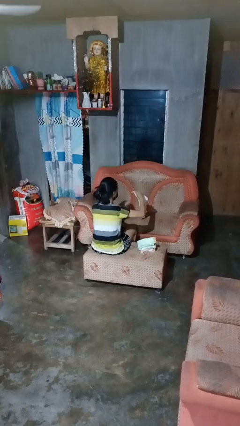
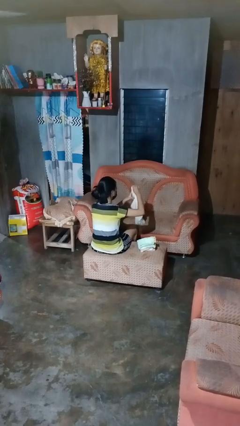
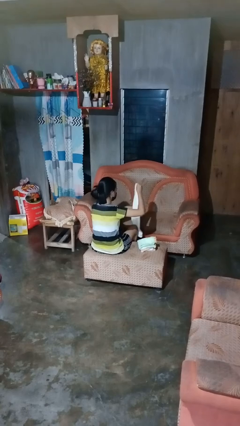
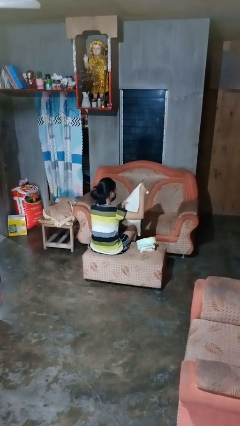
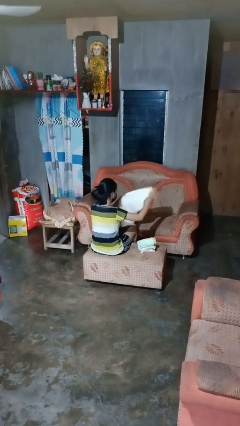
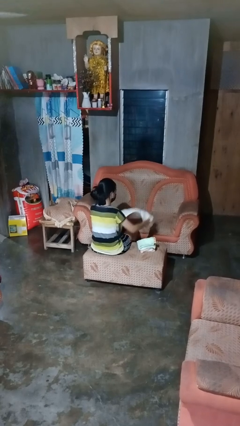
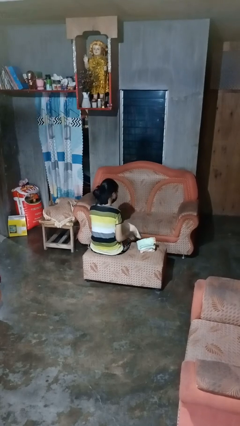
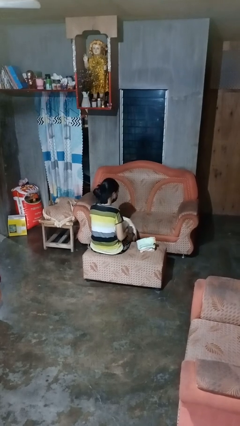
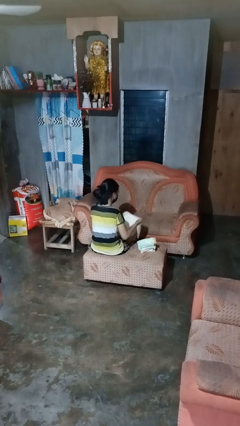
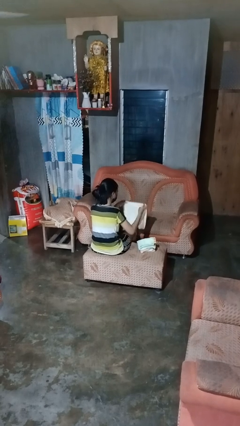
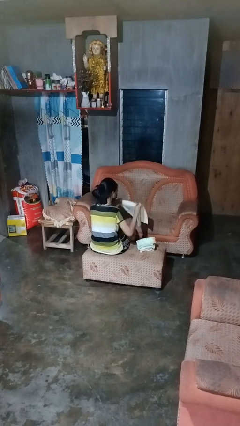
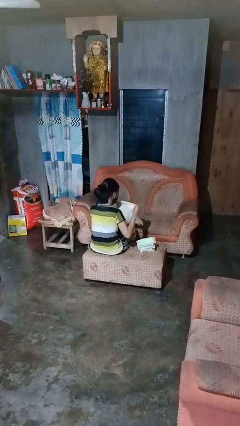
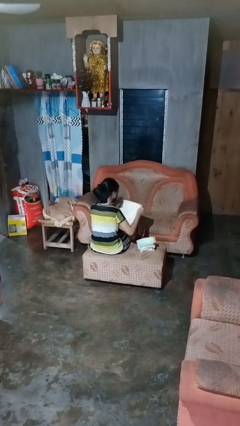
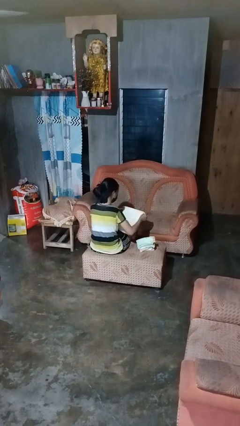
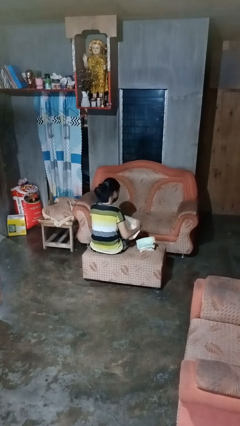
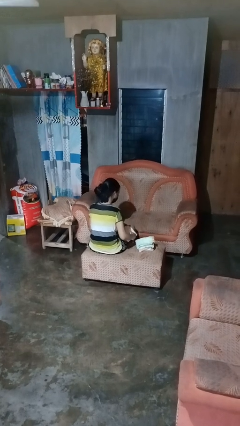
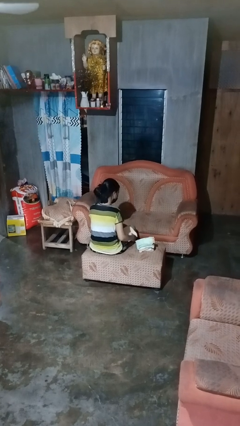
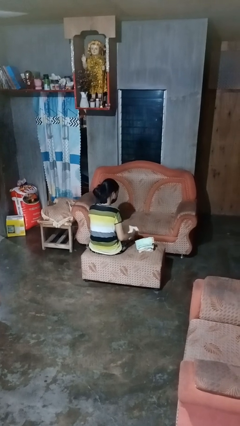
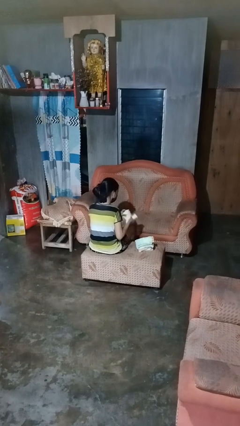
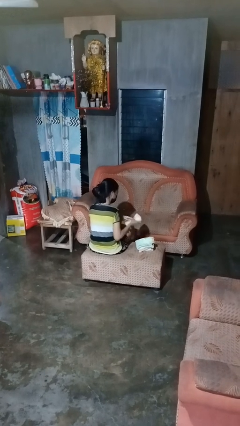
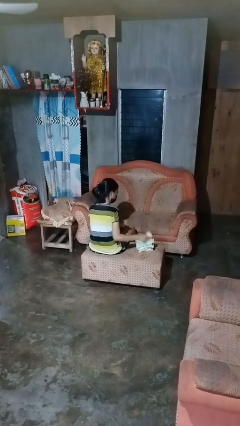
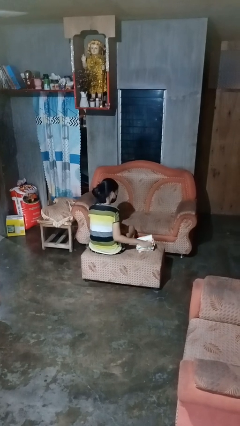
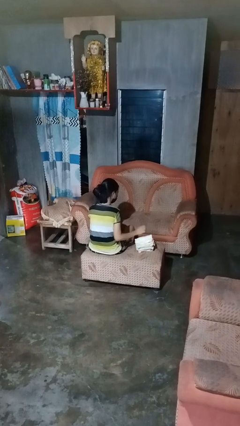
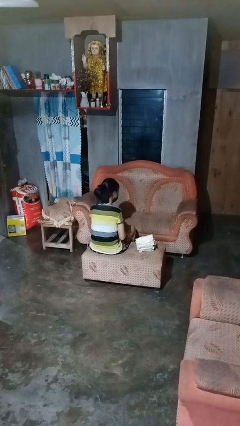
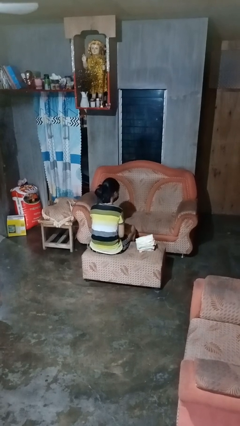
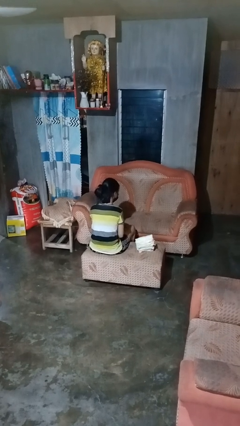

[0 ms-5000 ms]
person folds towel

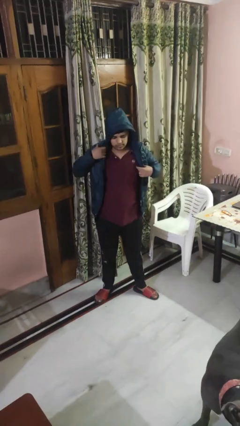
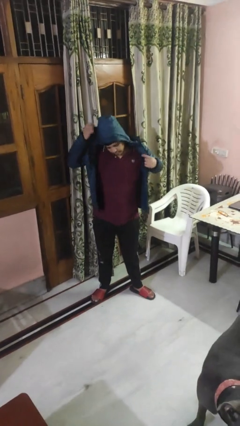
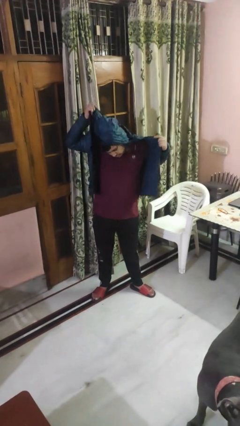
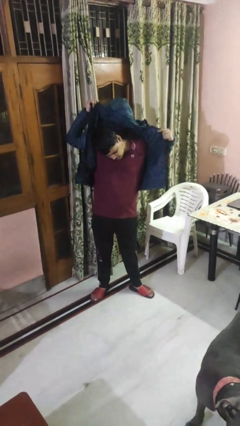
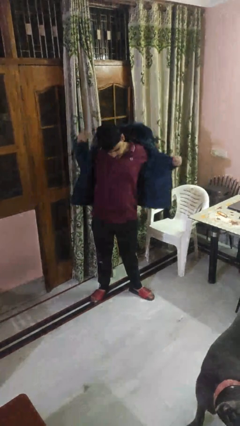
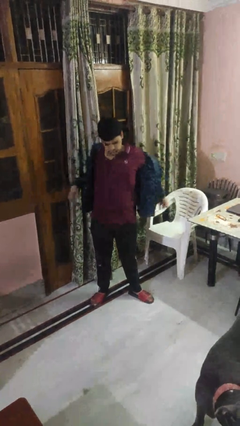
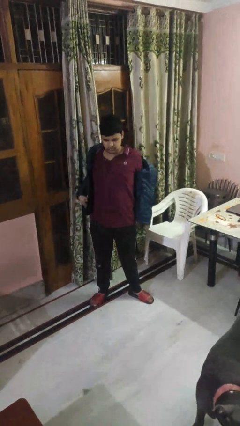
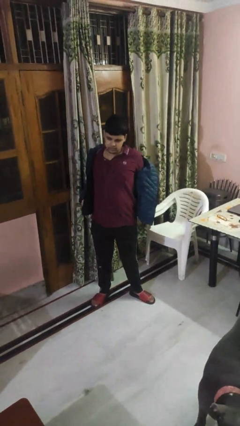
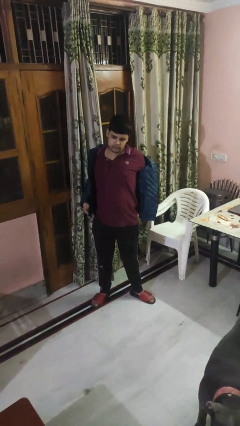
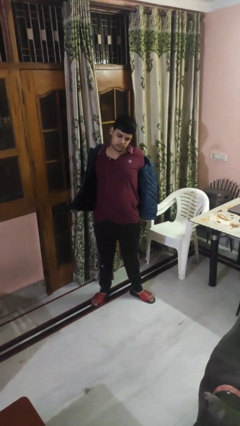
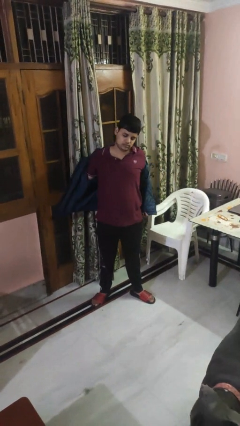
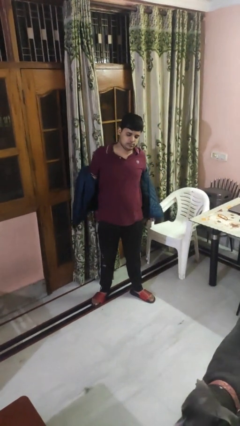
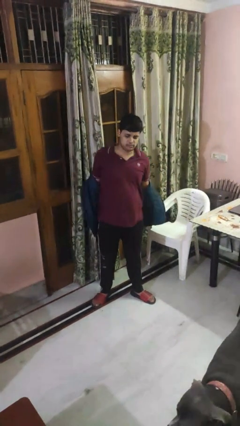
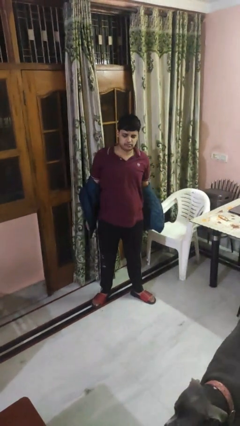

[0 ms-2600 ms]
person takes off hoodie

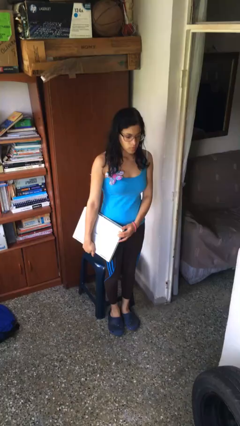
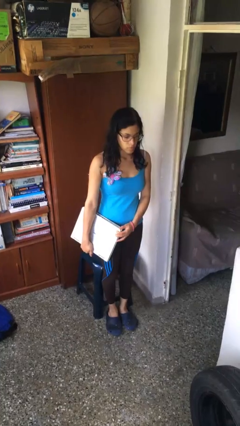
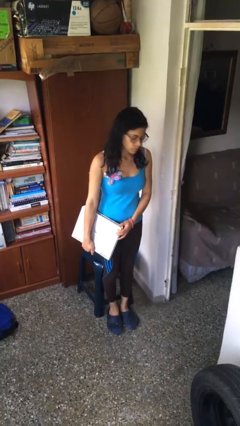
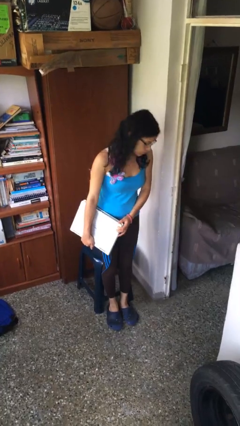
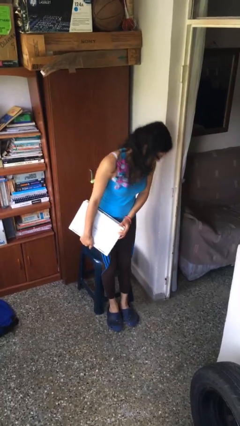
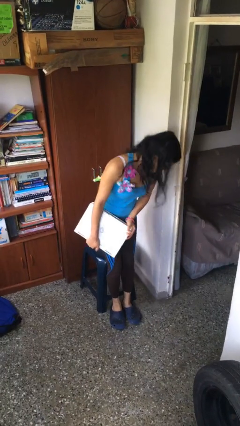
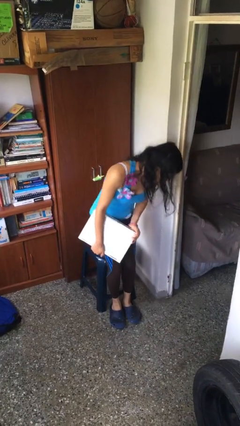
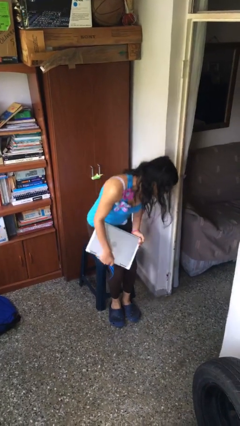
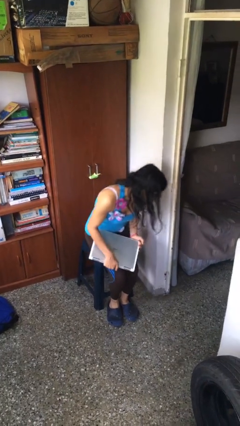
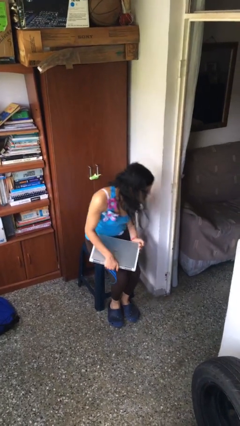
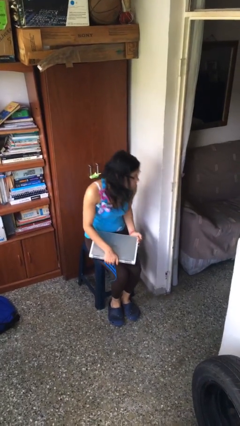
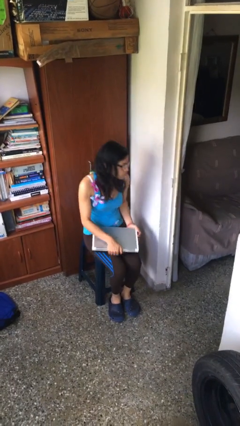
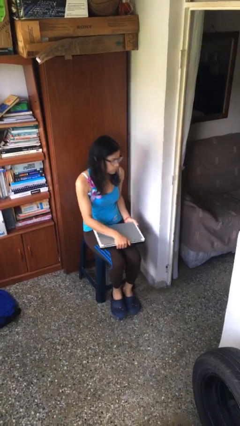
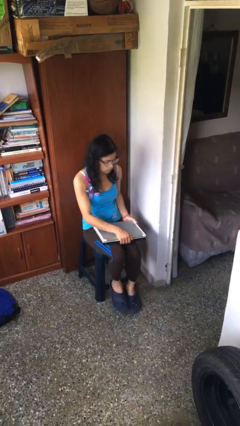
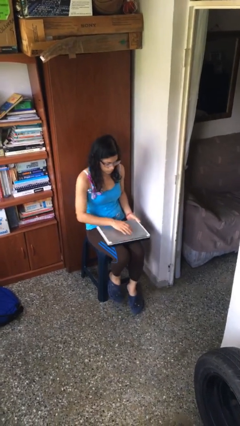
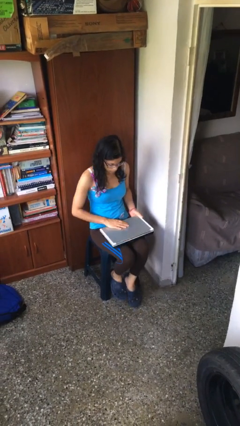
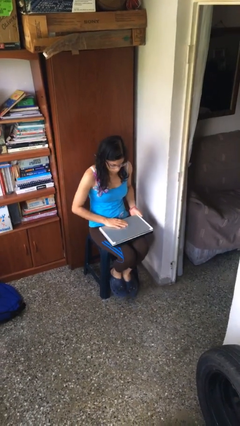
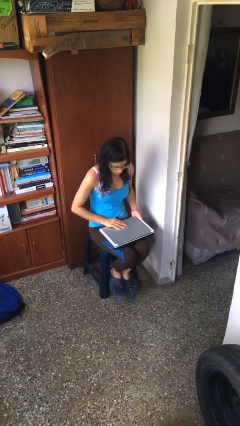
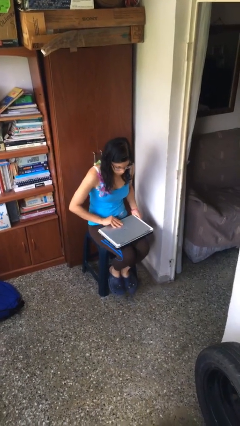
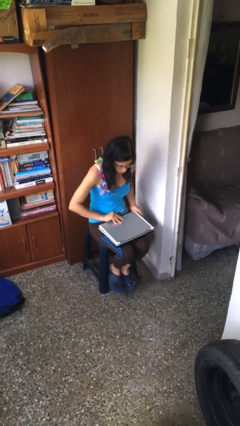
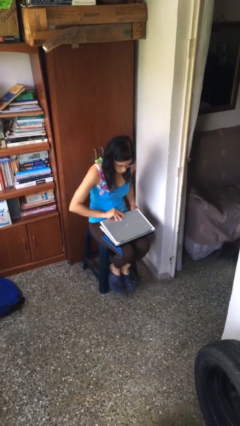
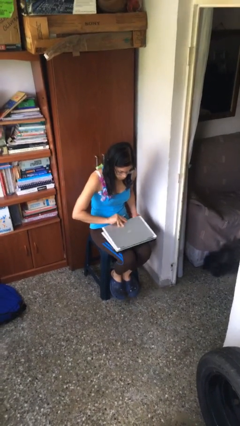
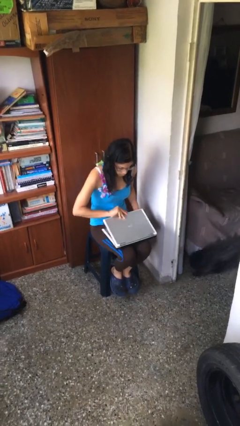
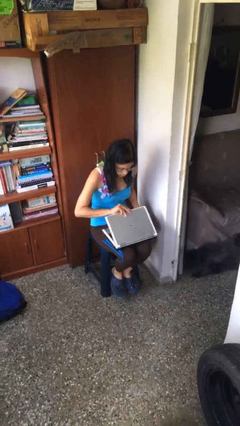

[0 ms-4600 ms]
person sits down

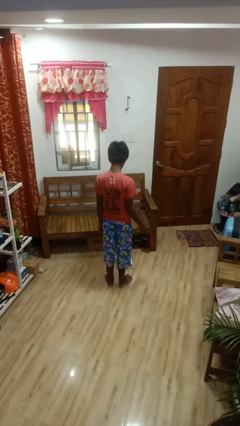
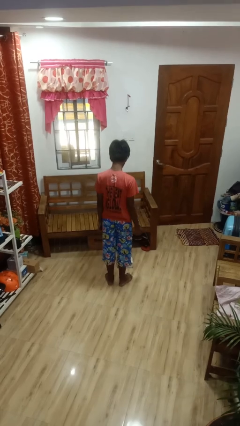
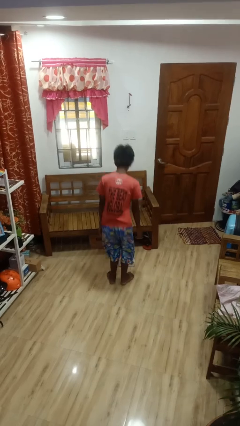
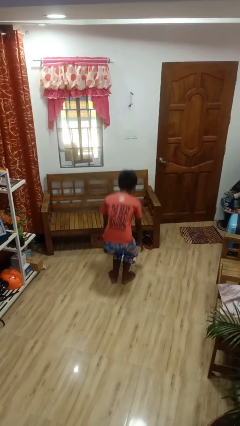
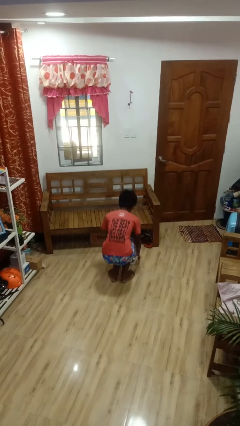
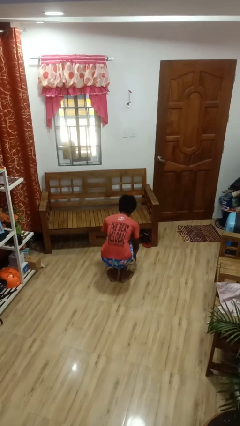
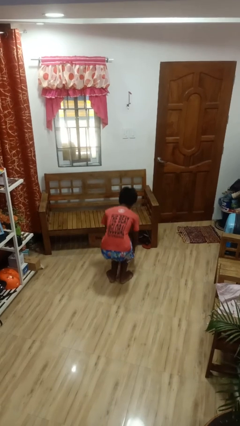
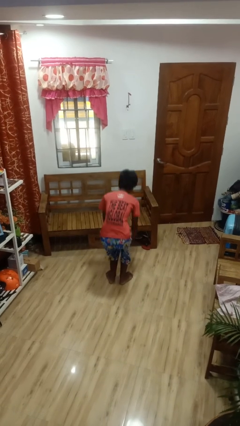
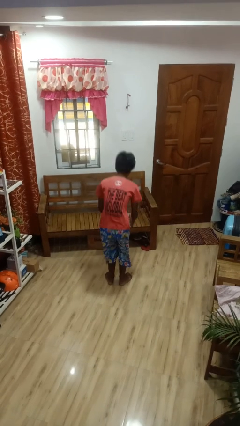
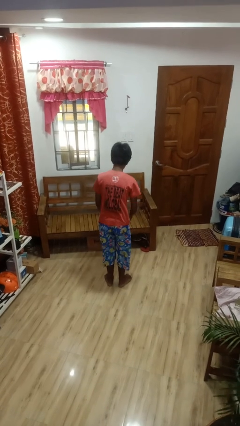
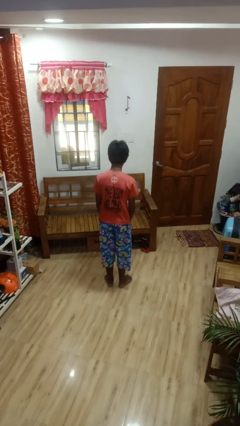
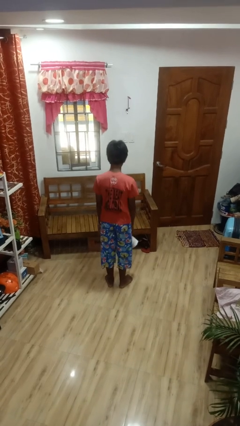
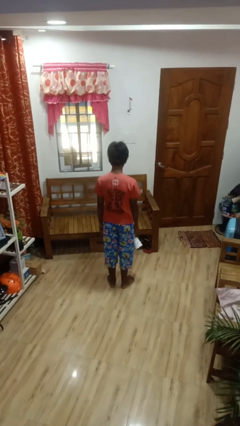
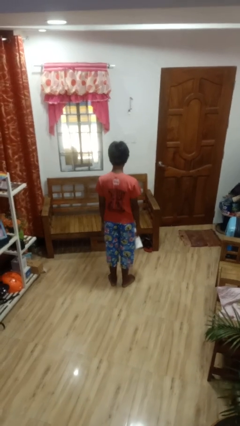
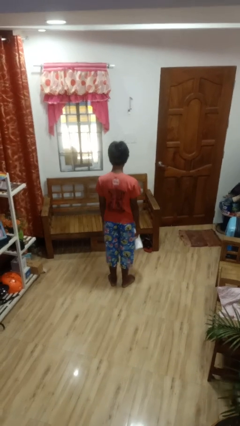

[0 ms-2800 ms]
person picks up object from floor

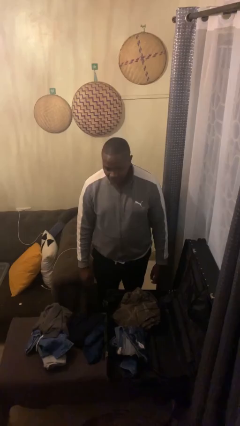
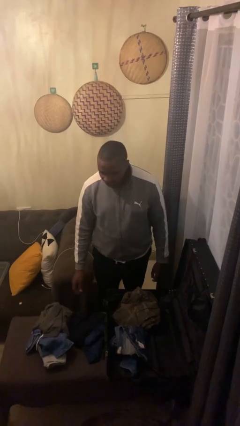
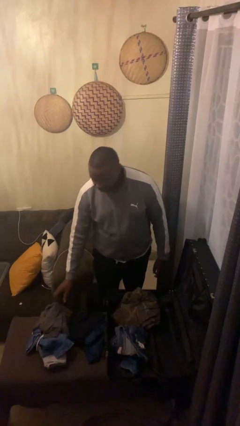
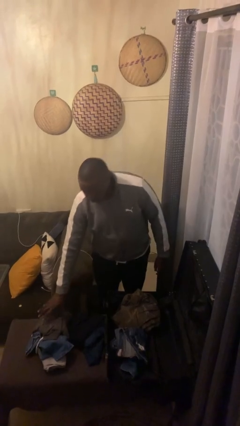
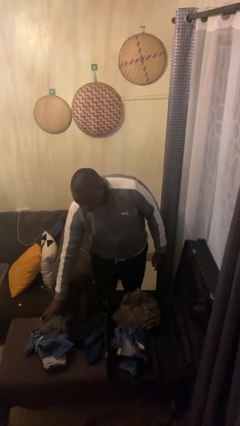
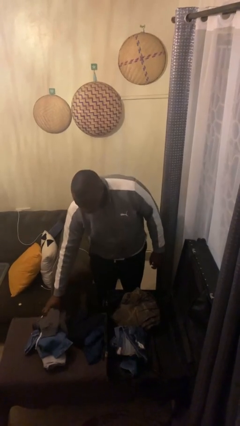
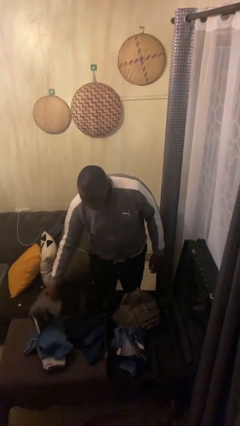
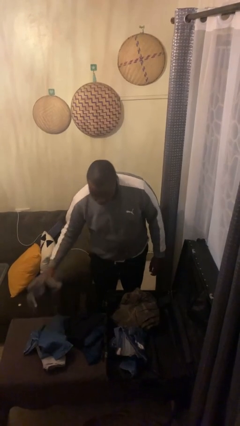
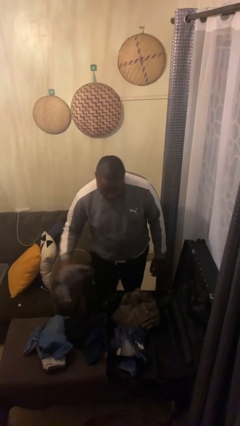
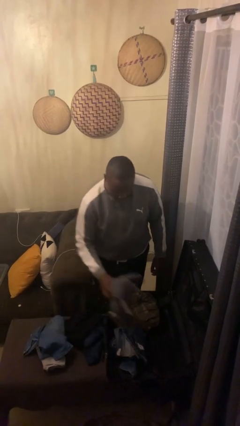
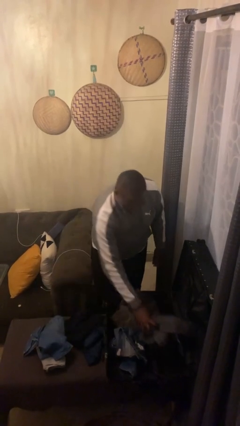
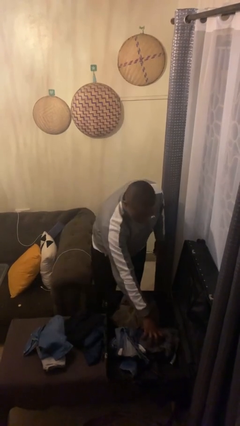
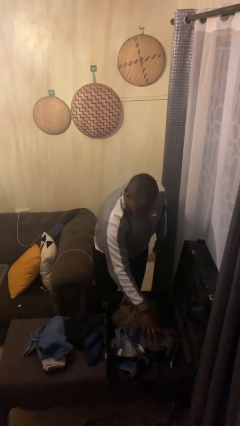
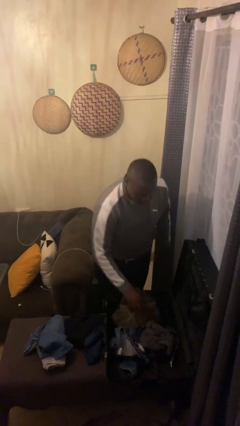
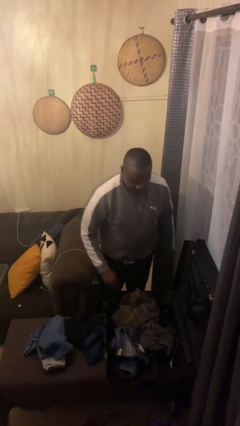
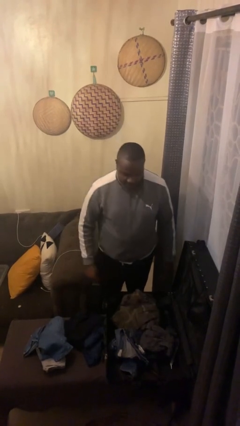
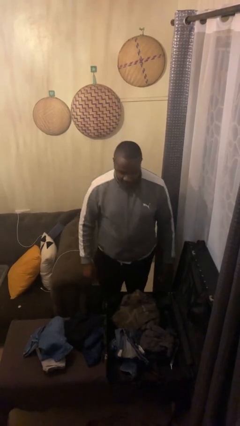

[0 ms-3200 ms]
person loads clothes into suitcase
